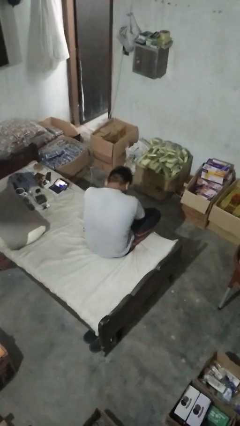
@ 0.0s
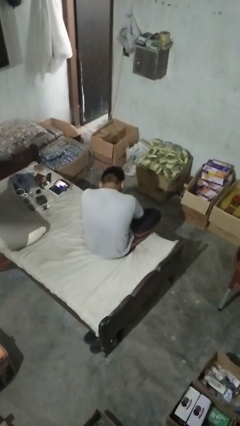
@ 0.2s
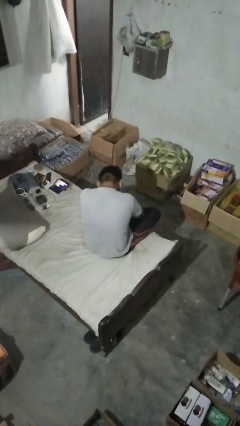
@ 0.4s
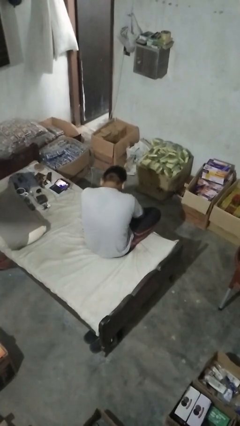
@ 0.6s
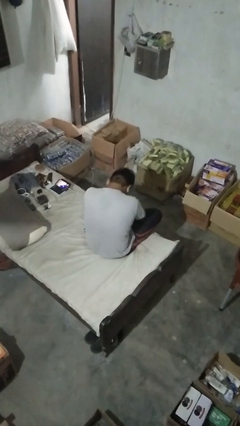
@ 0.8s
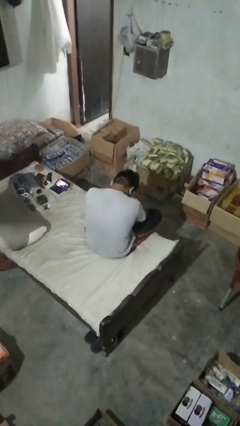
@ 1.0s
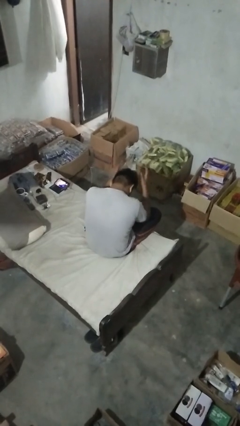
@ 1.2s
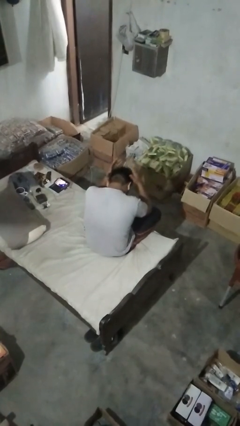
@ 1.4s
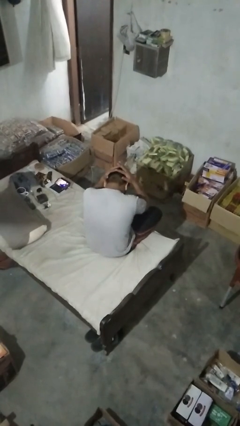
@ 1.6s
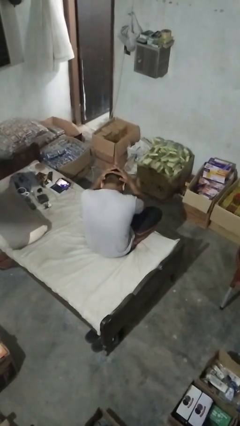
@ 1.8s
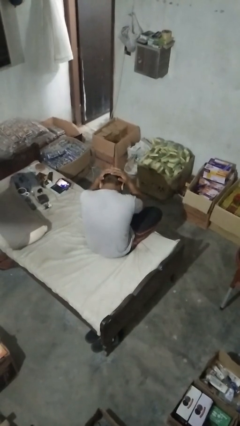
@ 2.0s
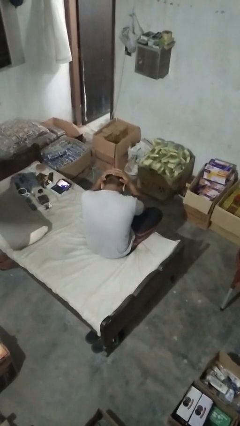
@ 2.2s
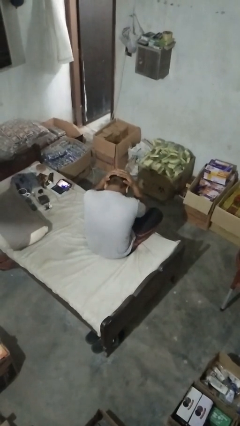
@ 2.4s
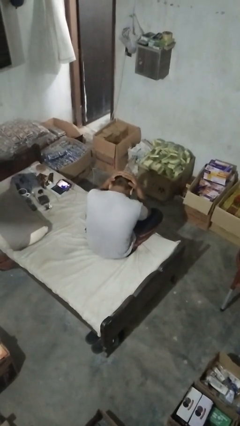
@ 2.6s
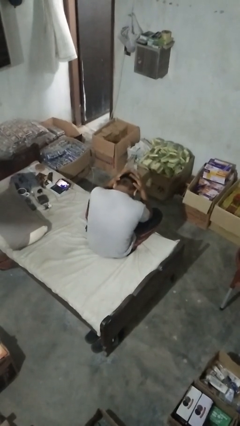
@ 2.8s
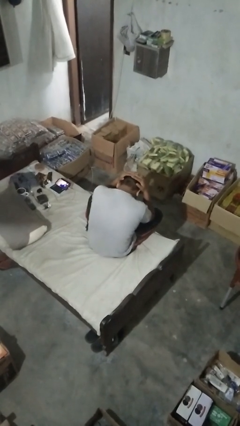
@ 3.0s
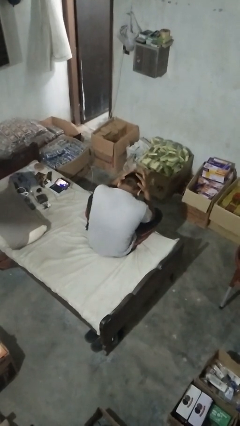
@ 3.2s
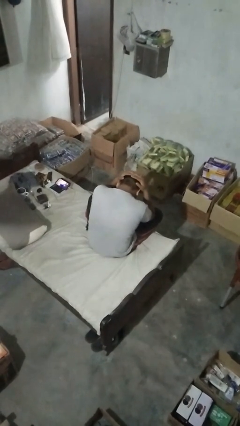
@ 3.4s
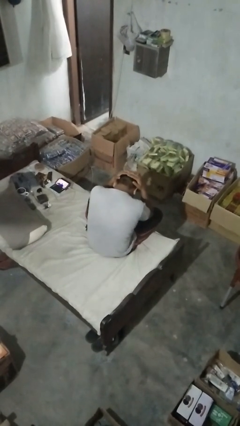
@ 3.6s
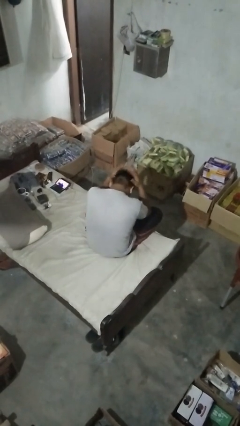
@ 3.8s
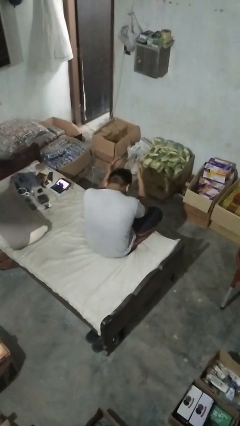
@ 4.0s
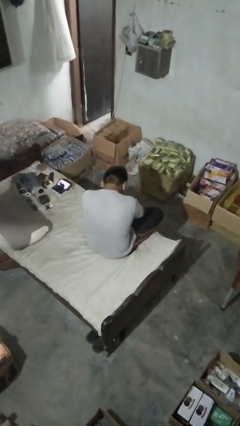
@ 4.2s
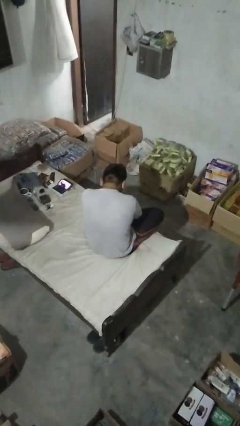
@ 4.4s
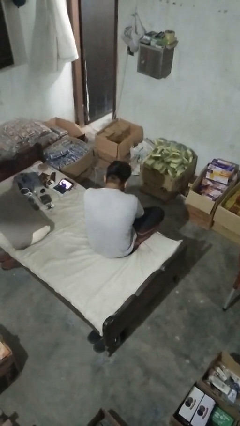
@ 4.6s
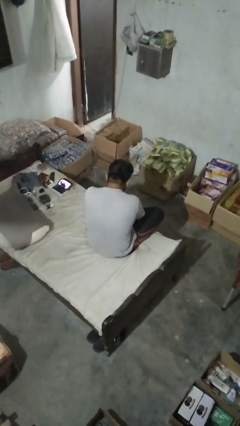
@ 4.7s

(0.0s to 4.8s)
person pats head

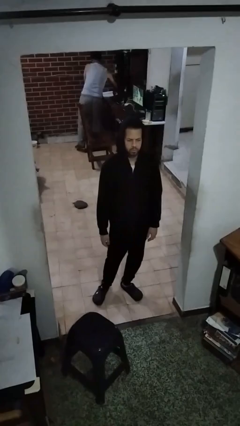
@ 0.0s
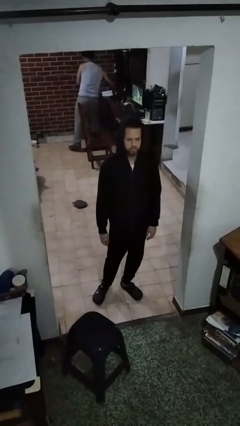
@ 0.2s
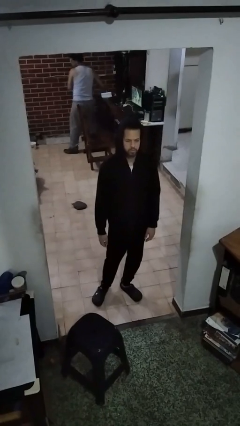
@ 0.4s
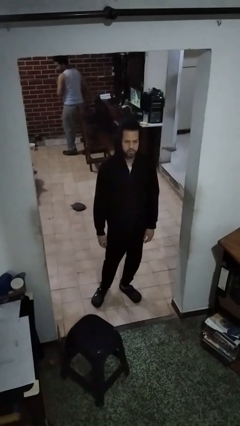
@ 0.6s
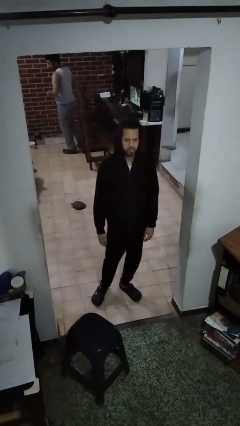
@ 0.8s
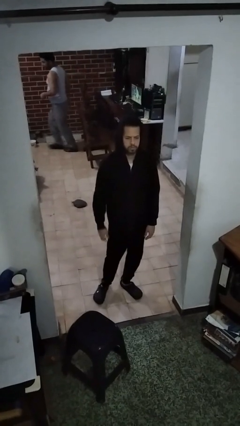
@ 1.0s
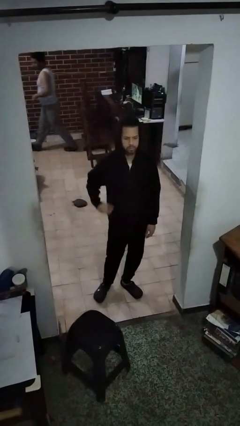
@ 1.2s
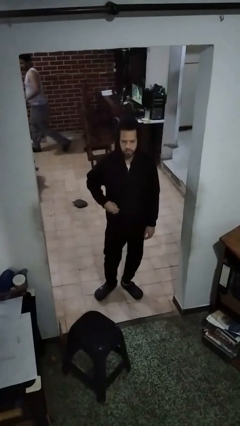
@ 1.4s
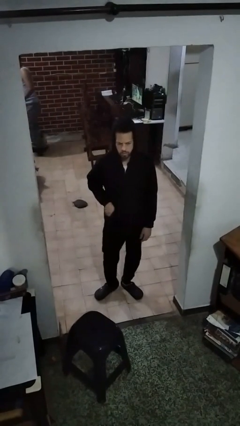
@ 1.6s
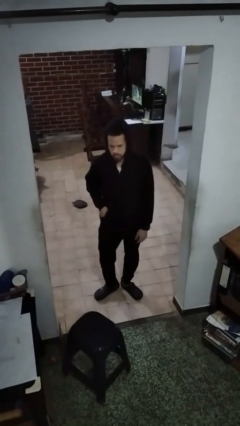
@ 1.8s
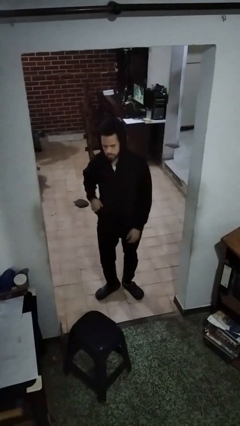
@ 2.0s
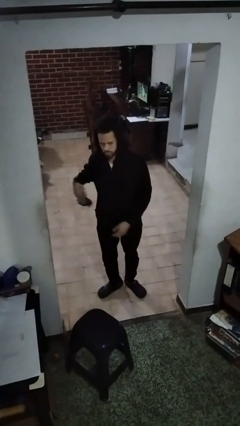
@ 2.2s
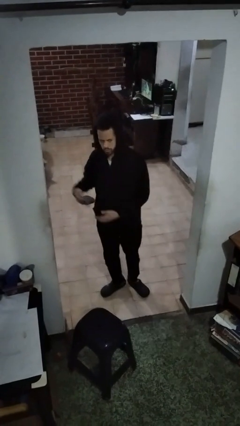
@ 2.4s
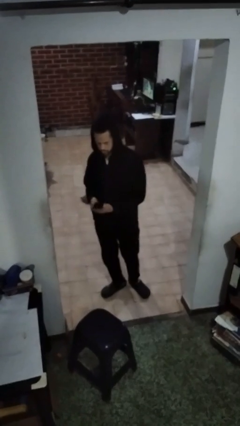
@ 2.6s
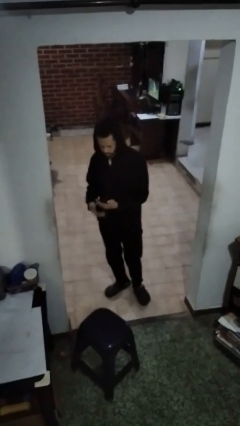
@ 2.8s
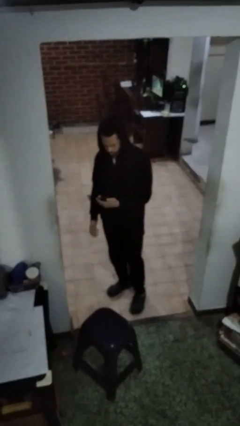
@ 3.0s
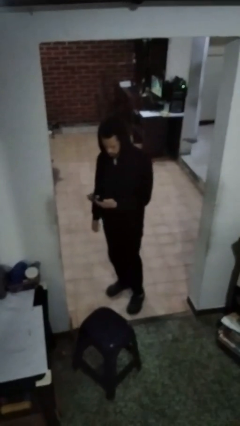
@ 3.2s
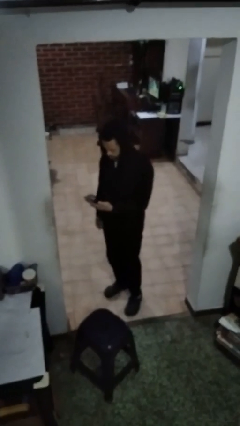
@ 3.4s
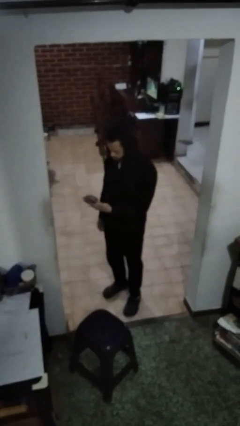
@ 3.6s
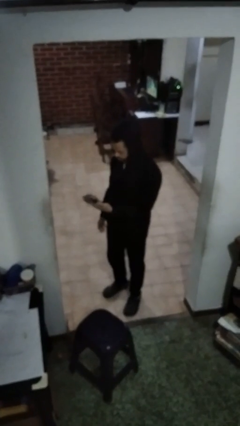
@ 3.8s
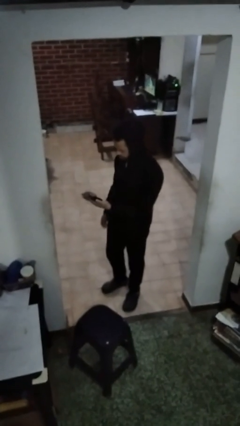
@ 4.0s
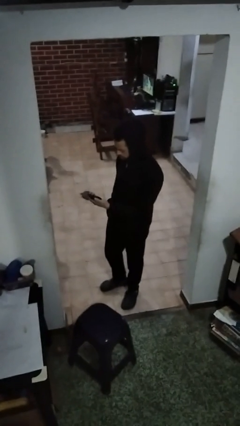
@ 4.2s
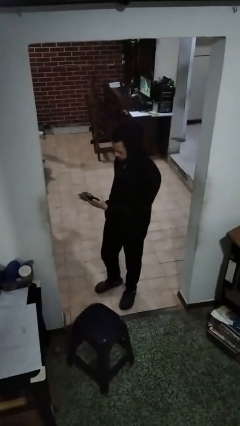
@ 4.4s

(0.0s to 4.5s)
person takes phone from pocket

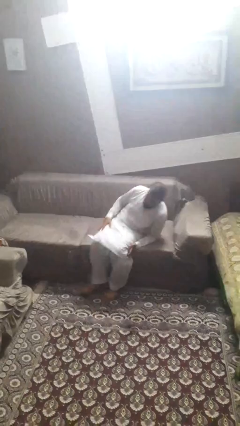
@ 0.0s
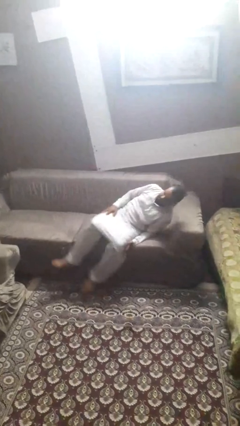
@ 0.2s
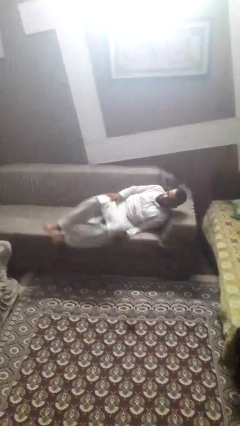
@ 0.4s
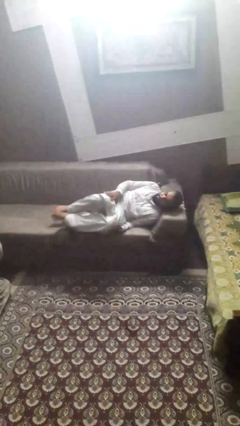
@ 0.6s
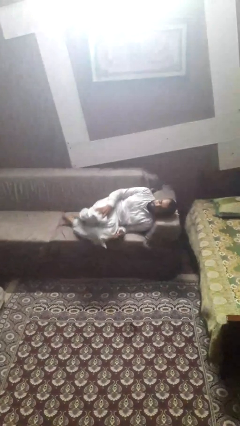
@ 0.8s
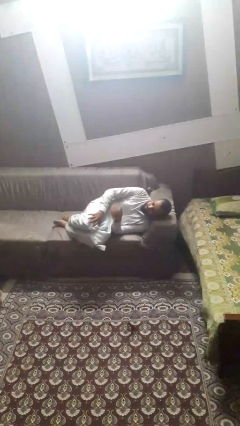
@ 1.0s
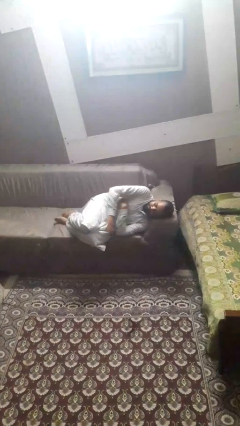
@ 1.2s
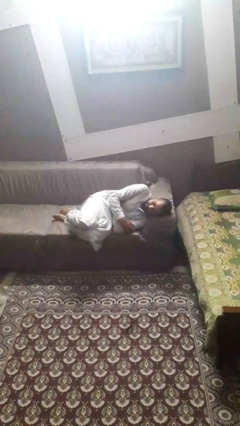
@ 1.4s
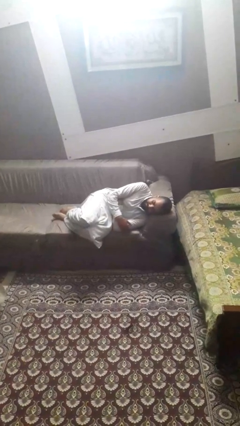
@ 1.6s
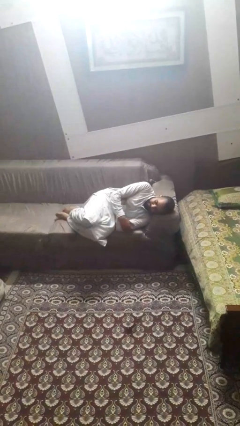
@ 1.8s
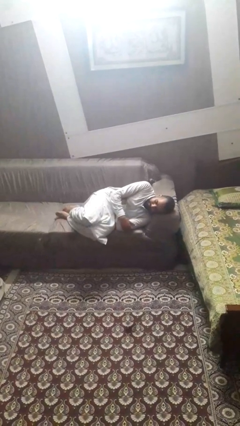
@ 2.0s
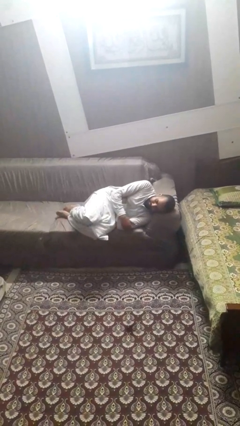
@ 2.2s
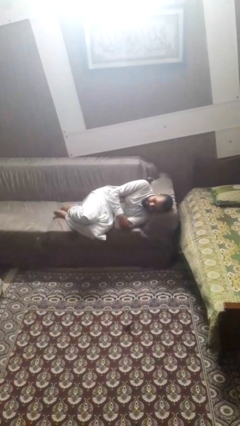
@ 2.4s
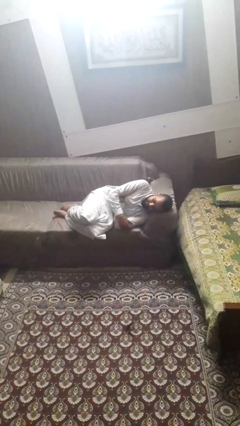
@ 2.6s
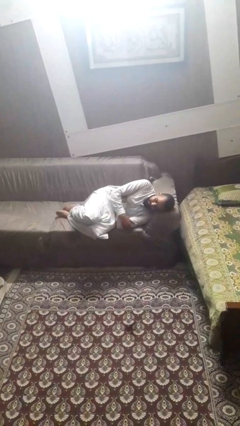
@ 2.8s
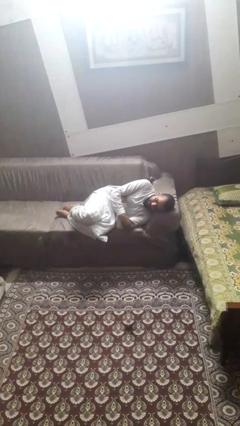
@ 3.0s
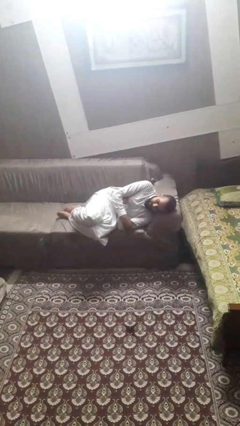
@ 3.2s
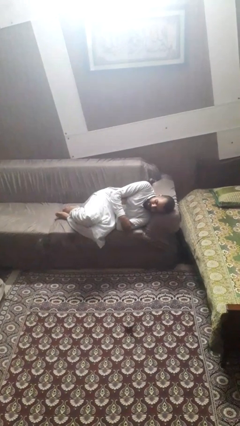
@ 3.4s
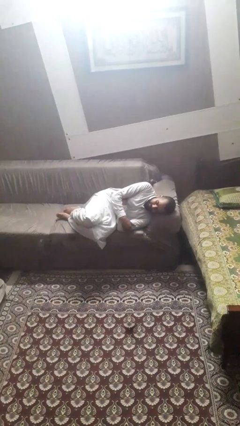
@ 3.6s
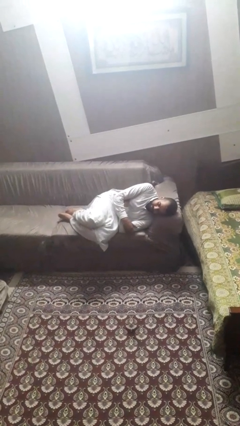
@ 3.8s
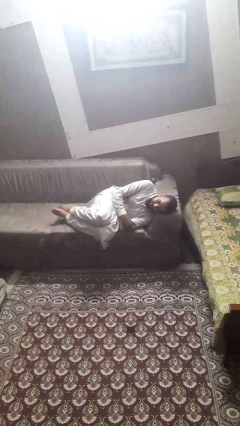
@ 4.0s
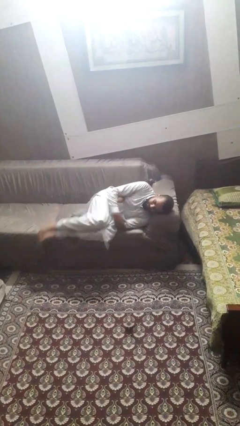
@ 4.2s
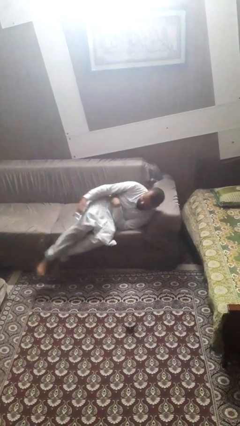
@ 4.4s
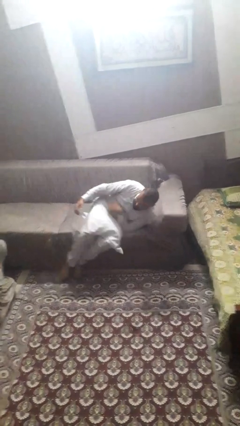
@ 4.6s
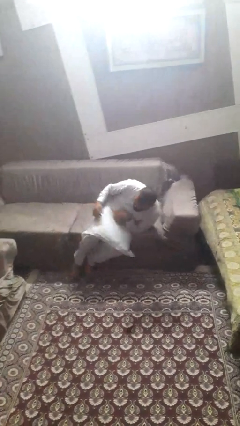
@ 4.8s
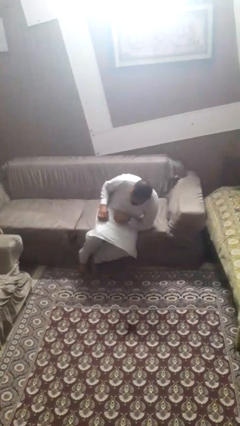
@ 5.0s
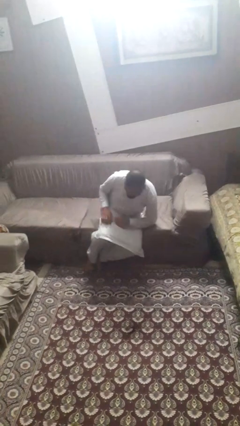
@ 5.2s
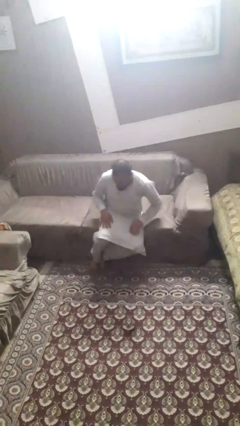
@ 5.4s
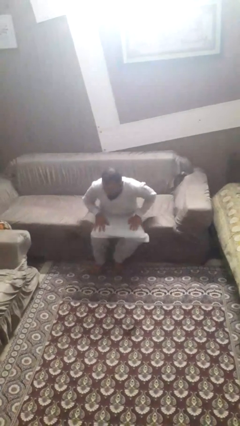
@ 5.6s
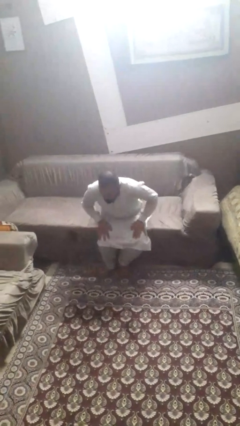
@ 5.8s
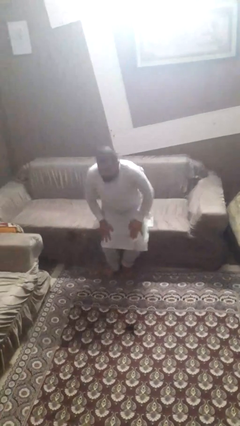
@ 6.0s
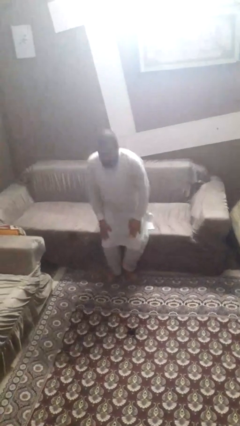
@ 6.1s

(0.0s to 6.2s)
person lies down on couch

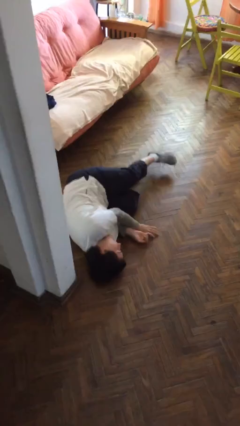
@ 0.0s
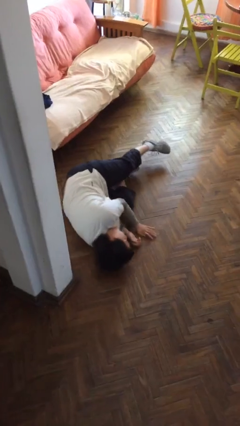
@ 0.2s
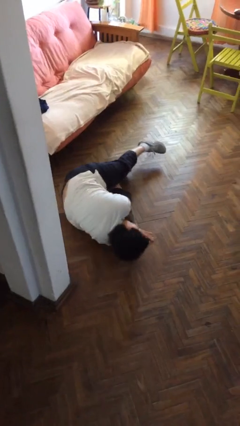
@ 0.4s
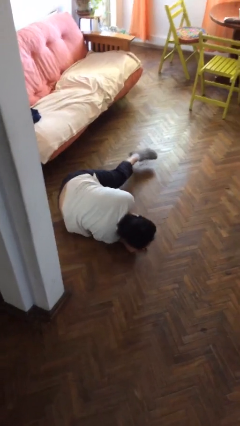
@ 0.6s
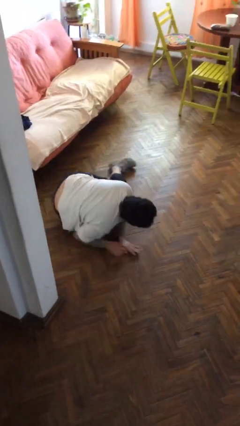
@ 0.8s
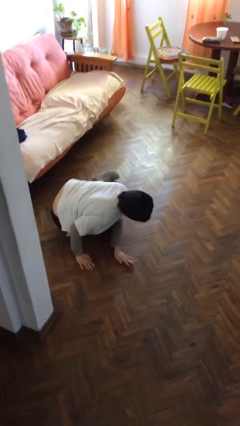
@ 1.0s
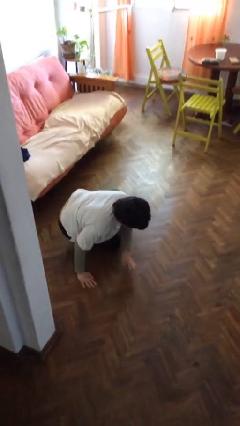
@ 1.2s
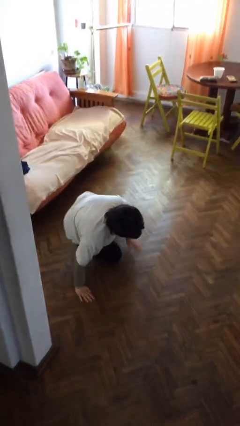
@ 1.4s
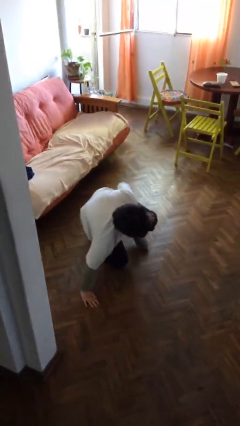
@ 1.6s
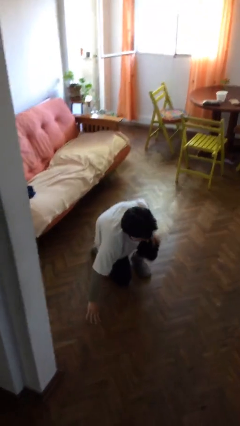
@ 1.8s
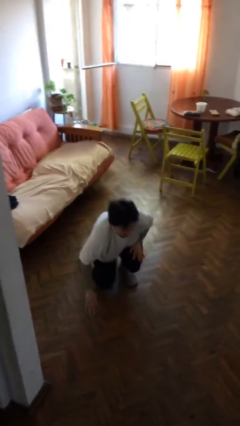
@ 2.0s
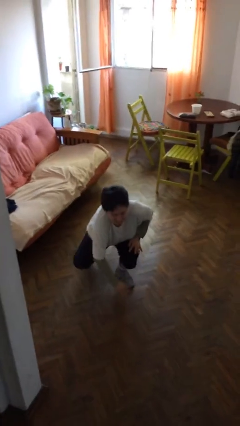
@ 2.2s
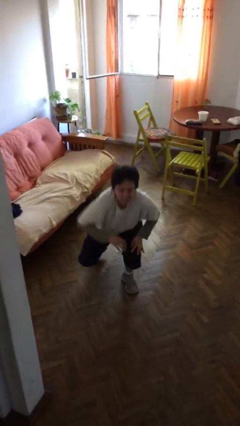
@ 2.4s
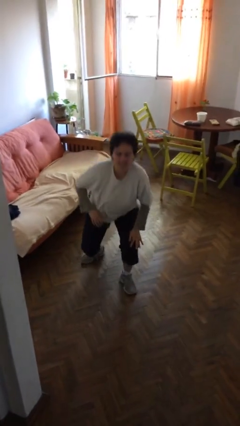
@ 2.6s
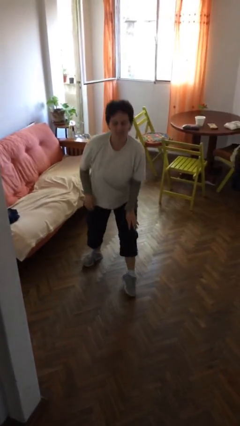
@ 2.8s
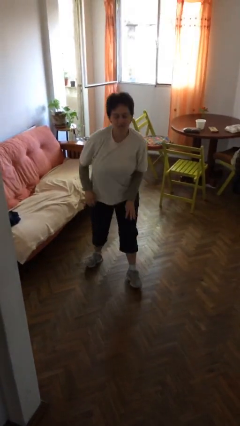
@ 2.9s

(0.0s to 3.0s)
person stands up from floor
